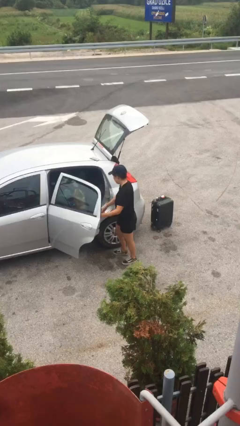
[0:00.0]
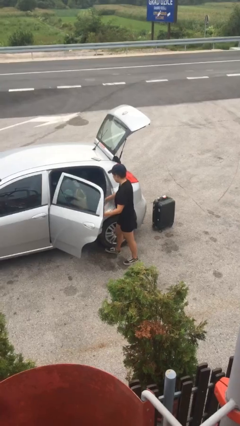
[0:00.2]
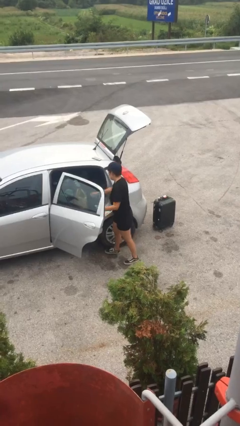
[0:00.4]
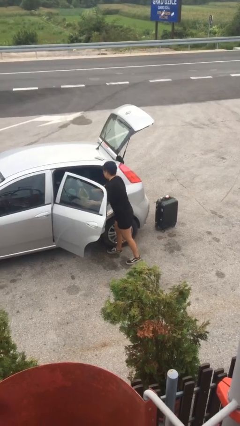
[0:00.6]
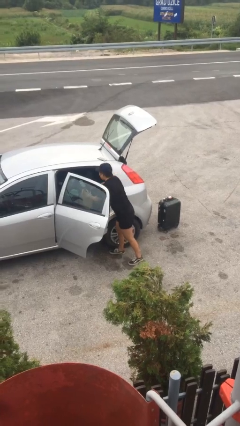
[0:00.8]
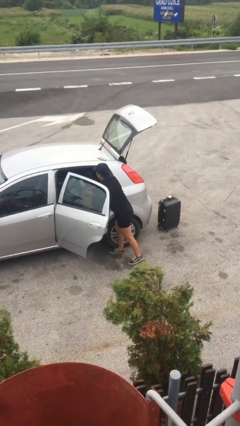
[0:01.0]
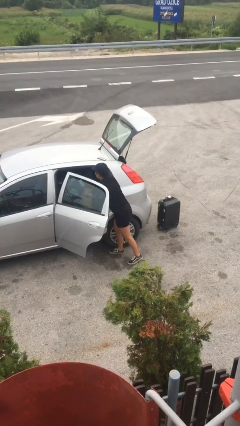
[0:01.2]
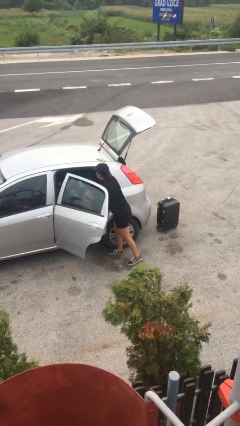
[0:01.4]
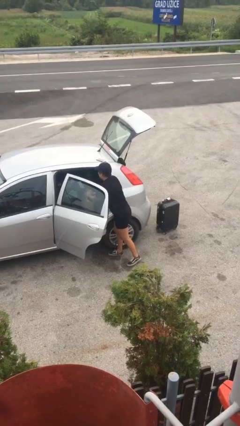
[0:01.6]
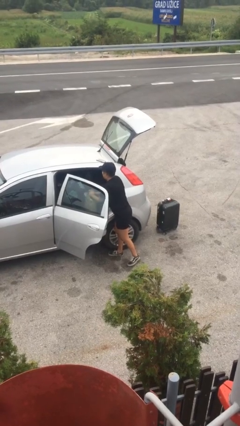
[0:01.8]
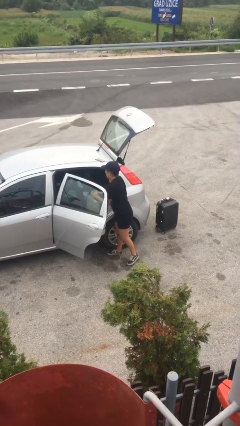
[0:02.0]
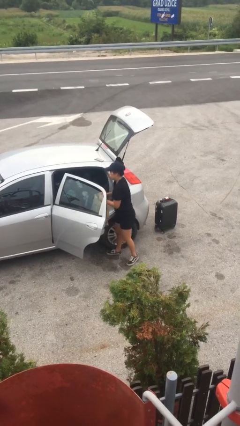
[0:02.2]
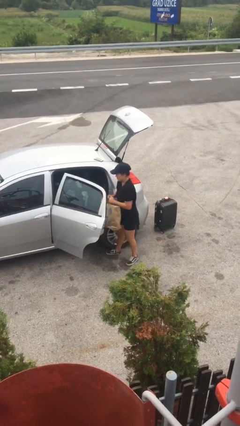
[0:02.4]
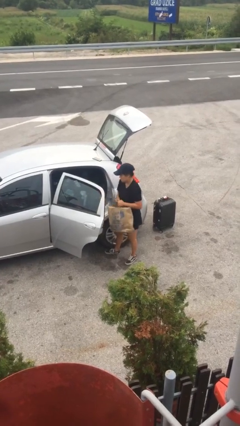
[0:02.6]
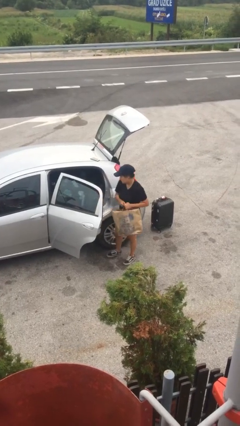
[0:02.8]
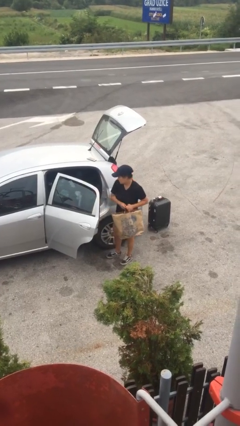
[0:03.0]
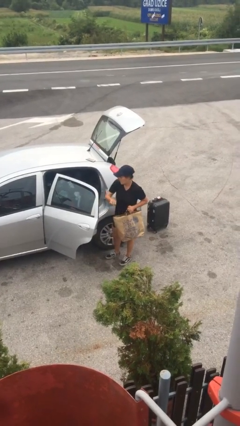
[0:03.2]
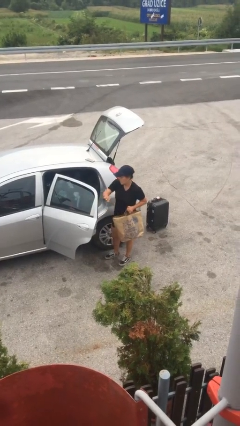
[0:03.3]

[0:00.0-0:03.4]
person unloads car

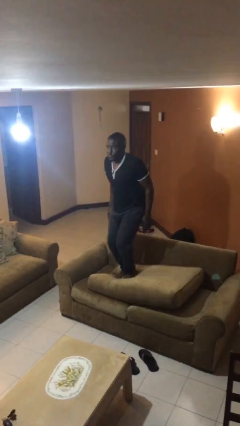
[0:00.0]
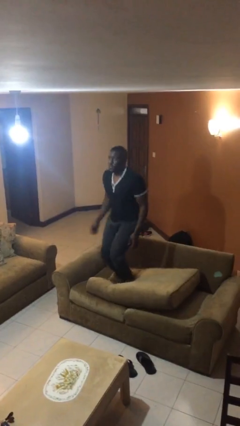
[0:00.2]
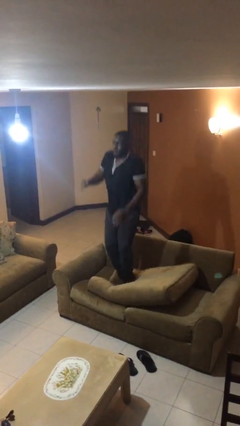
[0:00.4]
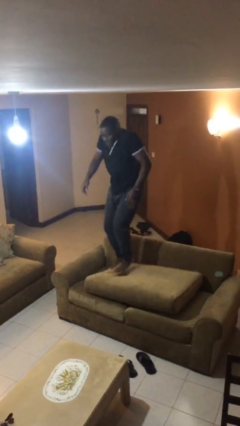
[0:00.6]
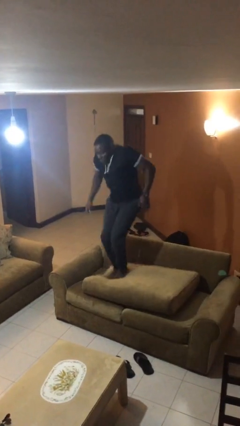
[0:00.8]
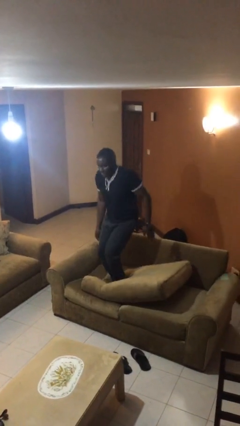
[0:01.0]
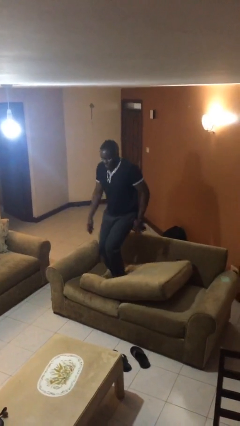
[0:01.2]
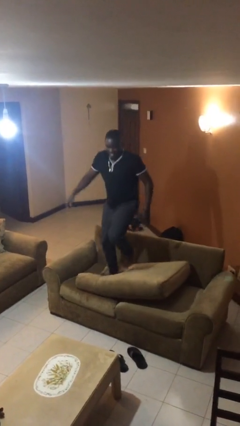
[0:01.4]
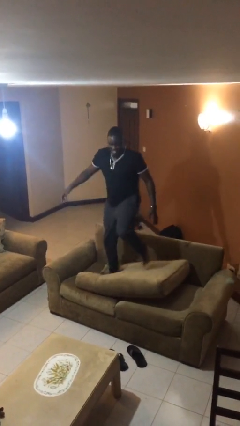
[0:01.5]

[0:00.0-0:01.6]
person jumps on couch

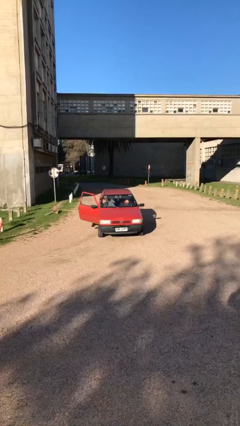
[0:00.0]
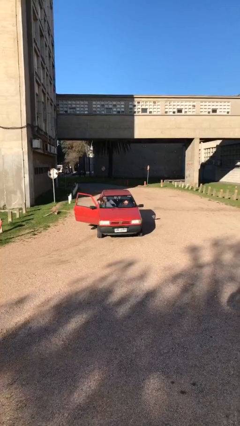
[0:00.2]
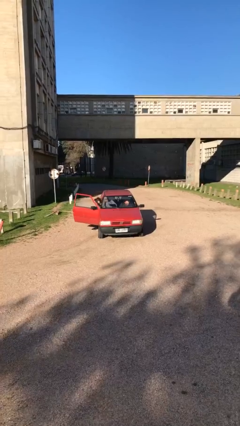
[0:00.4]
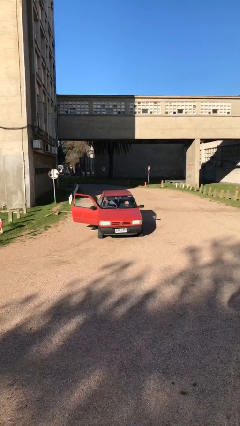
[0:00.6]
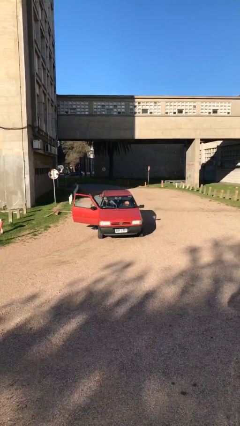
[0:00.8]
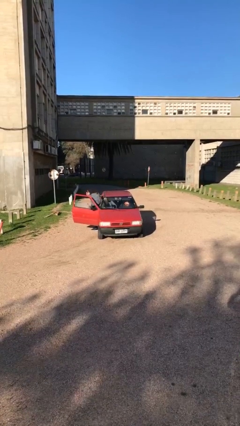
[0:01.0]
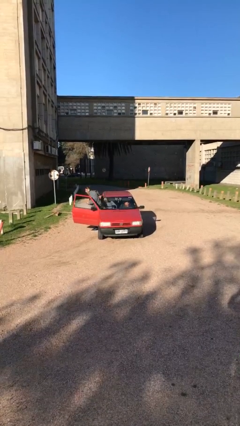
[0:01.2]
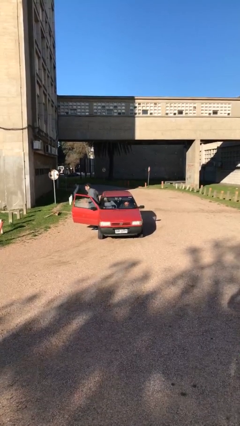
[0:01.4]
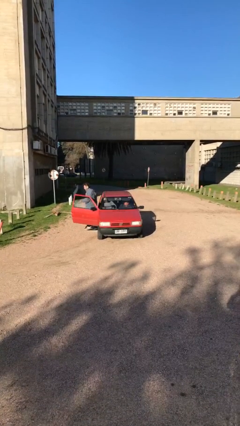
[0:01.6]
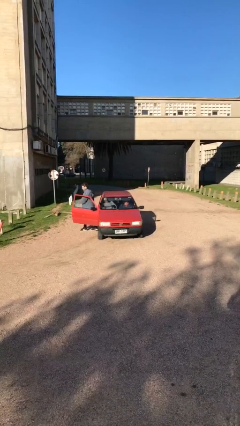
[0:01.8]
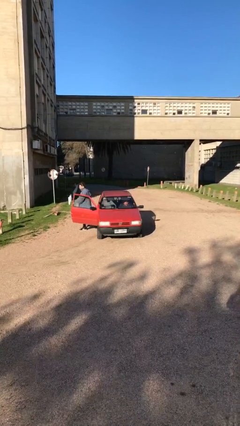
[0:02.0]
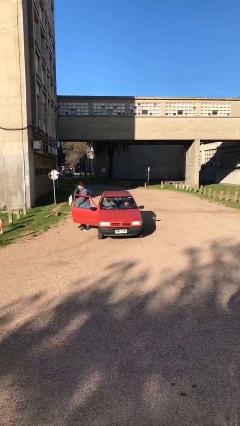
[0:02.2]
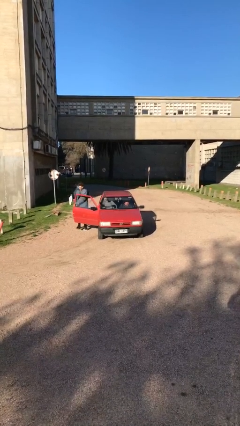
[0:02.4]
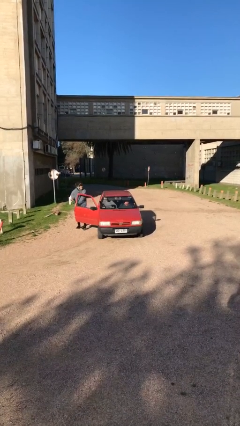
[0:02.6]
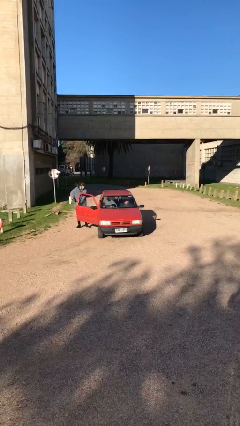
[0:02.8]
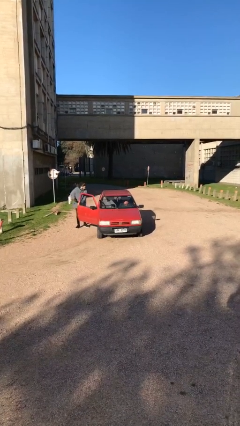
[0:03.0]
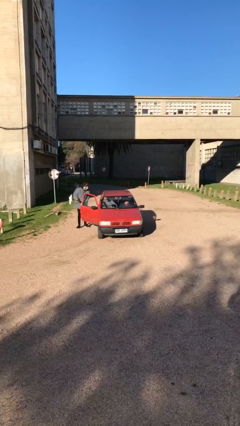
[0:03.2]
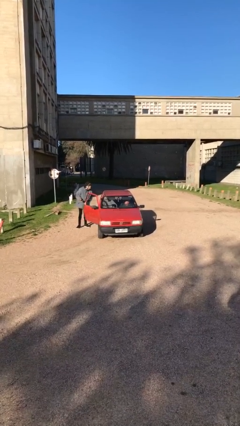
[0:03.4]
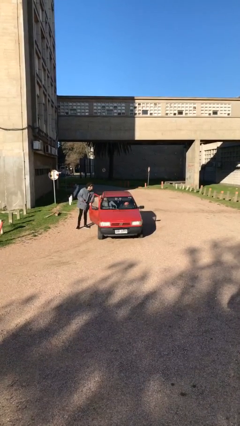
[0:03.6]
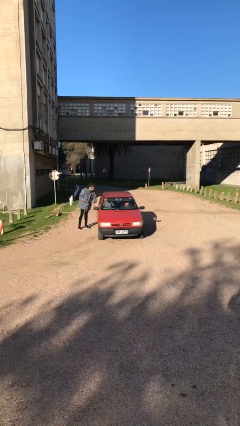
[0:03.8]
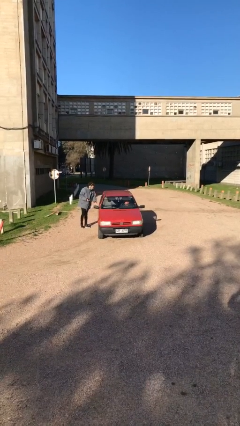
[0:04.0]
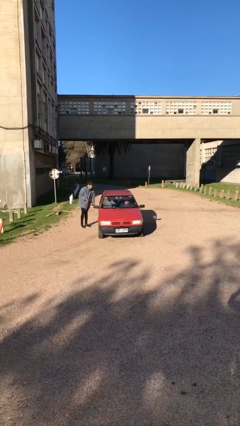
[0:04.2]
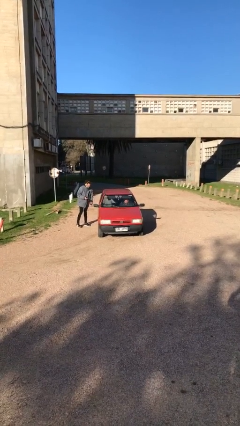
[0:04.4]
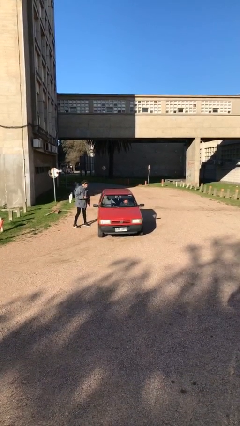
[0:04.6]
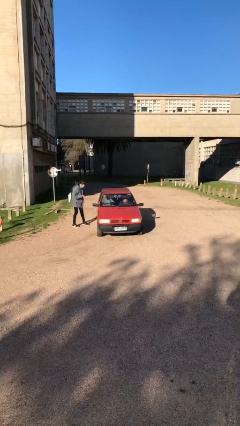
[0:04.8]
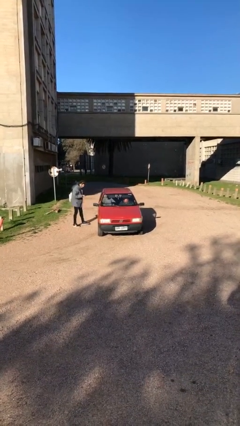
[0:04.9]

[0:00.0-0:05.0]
car drops off person

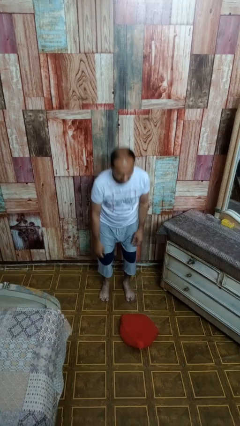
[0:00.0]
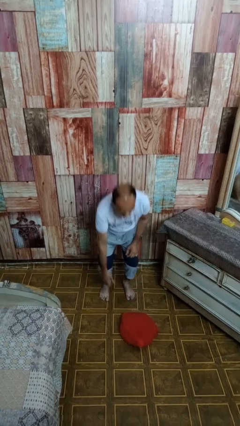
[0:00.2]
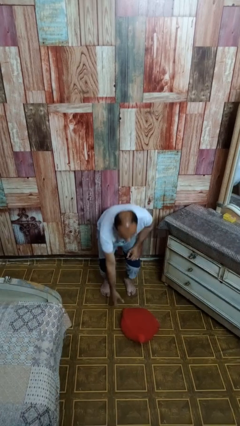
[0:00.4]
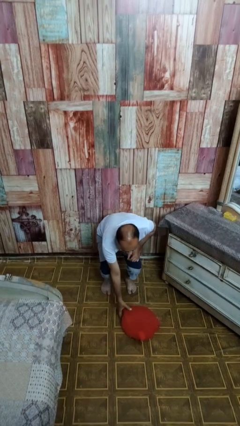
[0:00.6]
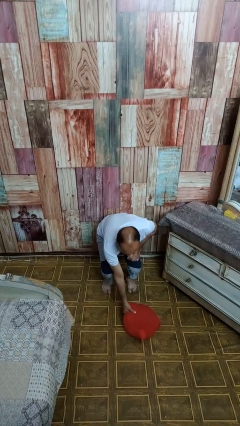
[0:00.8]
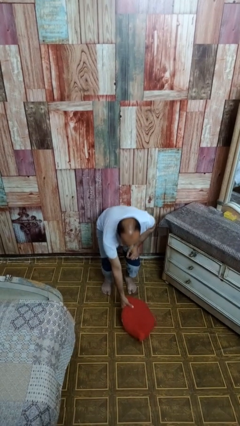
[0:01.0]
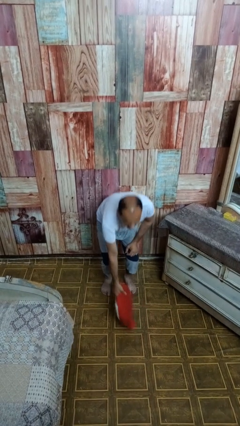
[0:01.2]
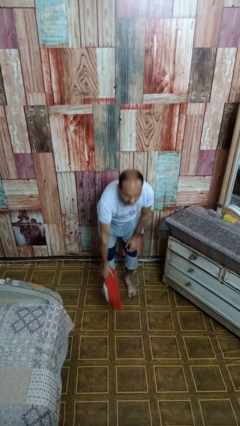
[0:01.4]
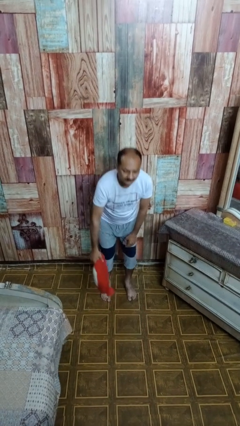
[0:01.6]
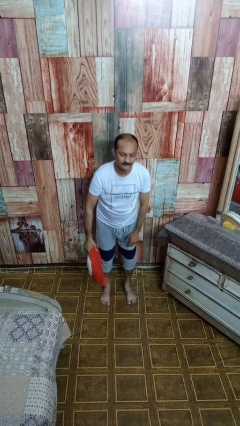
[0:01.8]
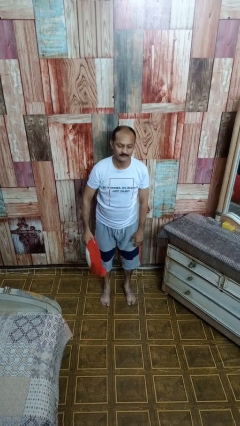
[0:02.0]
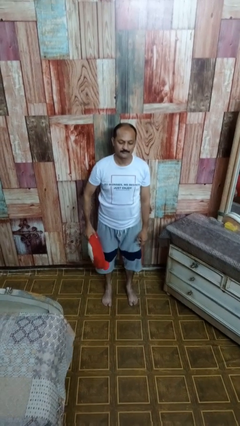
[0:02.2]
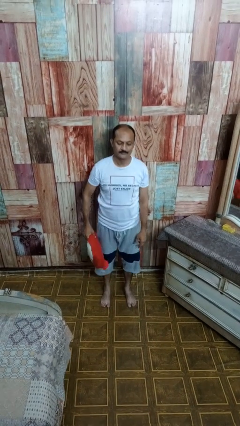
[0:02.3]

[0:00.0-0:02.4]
person picks up object from floor

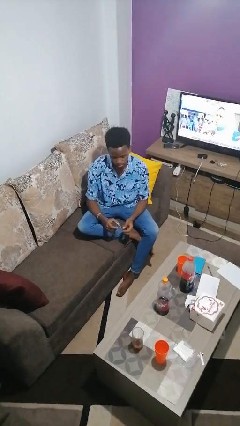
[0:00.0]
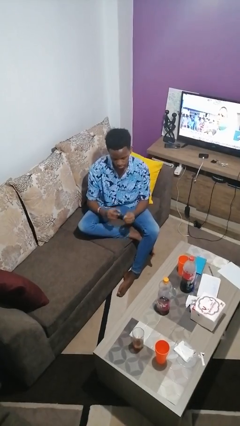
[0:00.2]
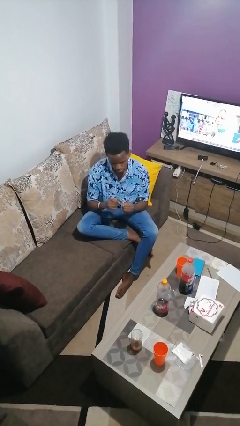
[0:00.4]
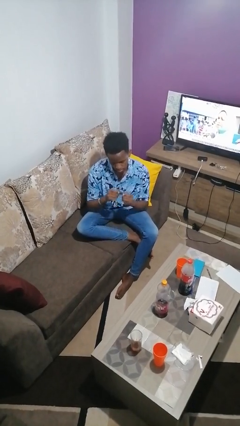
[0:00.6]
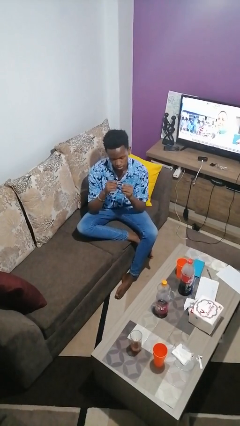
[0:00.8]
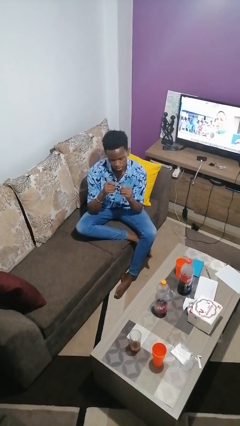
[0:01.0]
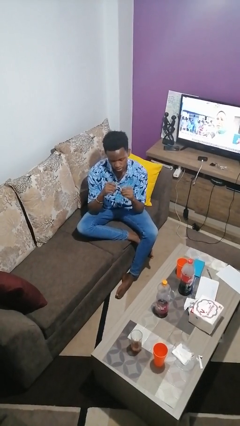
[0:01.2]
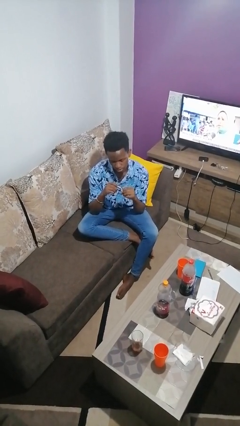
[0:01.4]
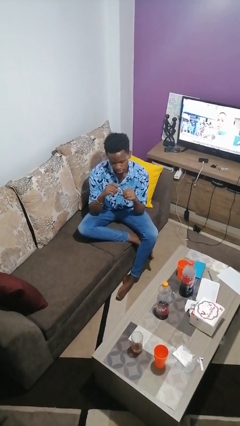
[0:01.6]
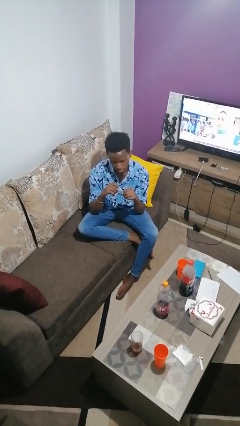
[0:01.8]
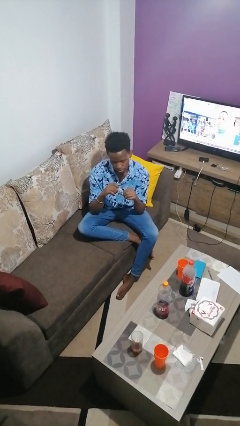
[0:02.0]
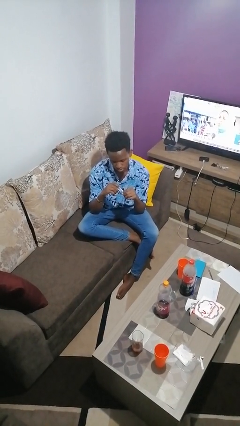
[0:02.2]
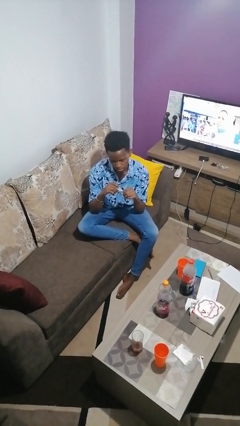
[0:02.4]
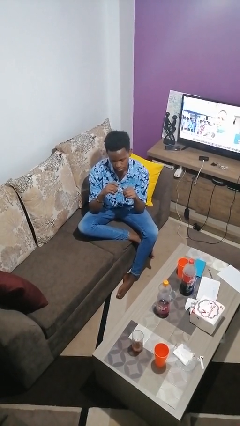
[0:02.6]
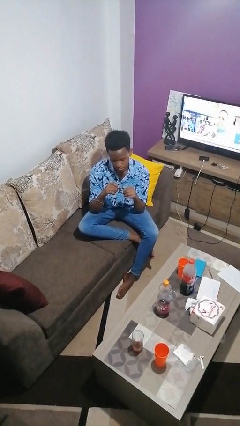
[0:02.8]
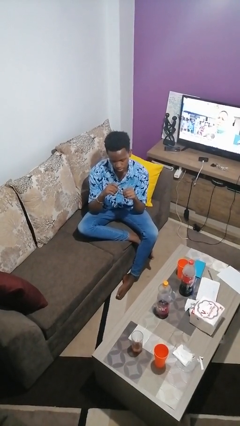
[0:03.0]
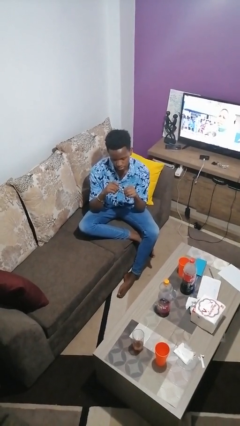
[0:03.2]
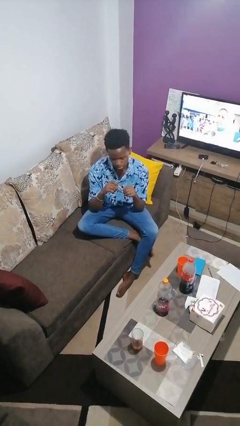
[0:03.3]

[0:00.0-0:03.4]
person clips fingernails

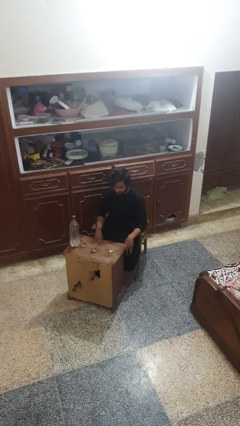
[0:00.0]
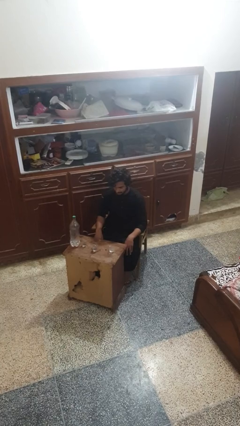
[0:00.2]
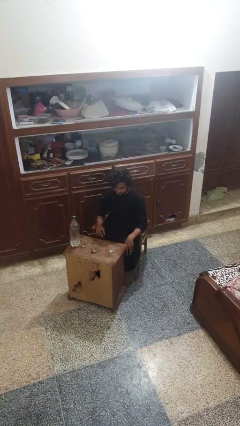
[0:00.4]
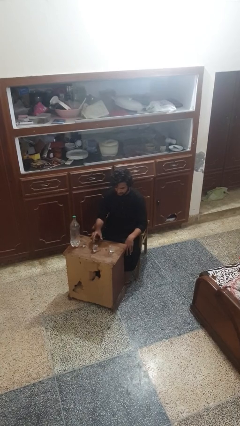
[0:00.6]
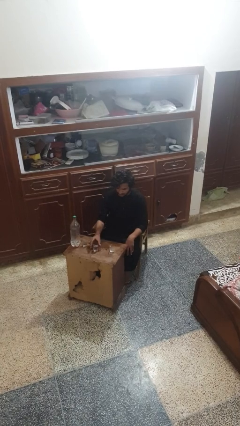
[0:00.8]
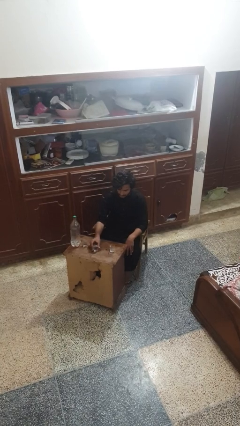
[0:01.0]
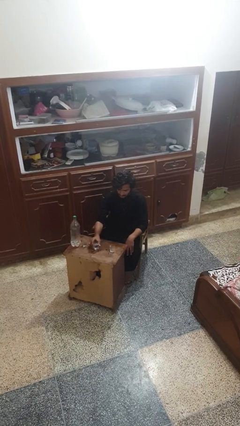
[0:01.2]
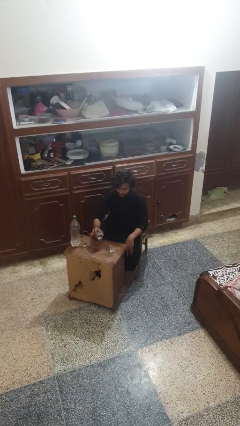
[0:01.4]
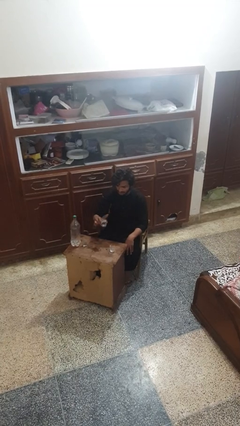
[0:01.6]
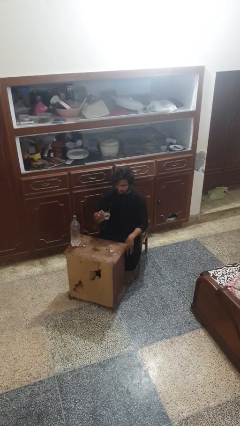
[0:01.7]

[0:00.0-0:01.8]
person picks up object from table
